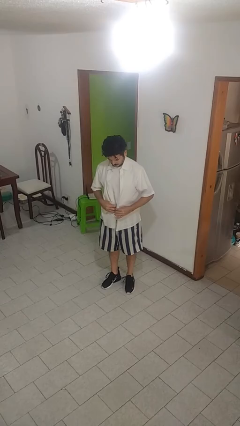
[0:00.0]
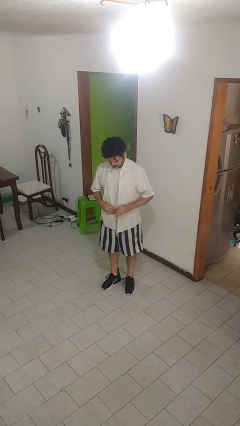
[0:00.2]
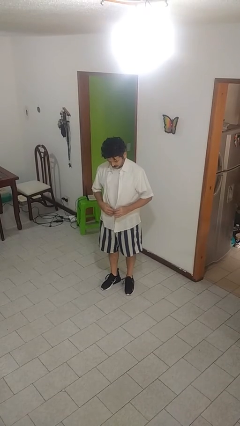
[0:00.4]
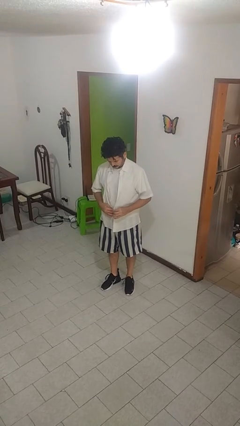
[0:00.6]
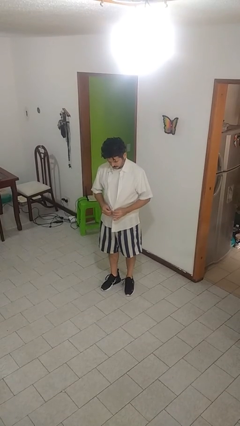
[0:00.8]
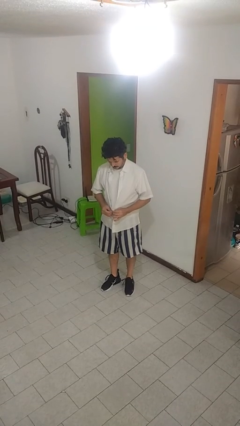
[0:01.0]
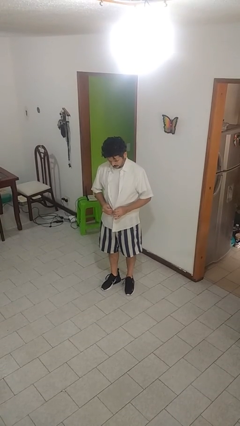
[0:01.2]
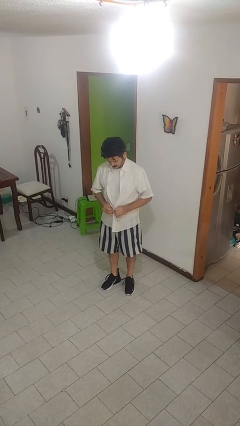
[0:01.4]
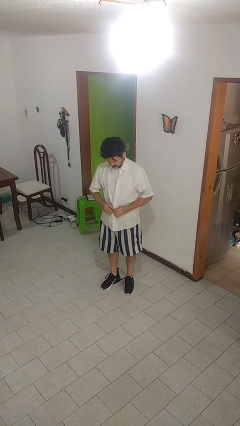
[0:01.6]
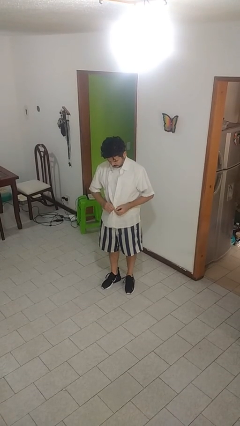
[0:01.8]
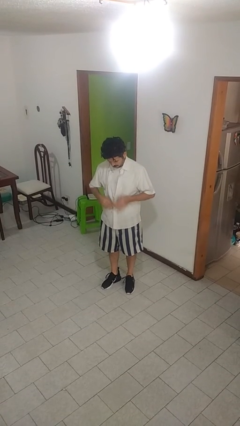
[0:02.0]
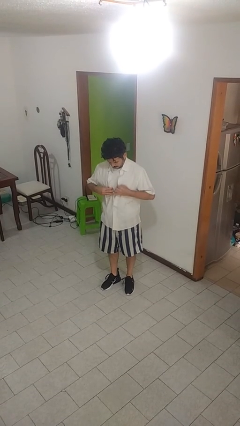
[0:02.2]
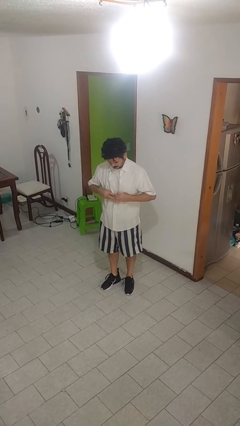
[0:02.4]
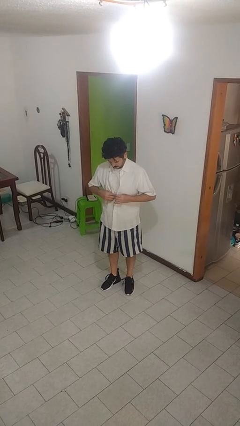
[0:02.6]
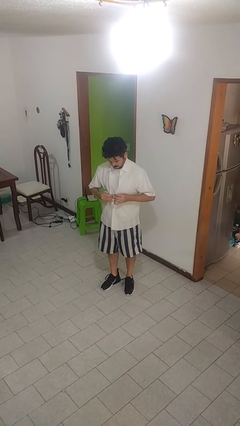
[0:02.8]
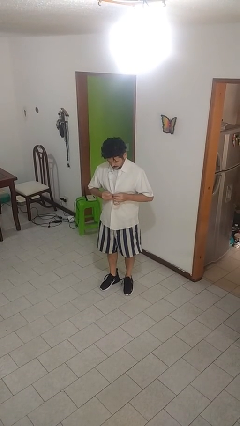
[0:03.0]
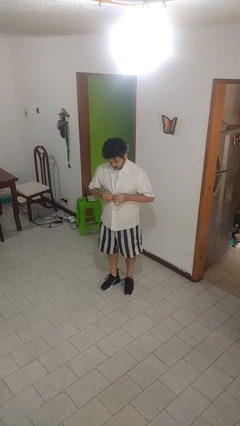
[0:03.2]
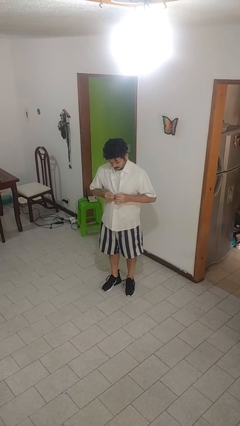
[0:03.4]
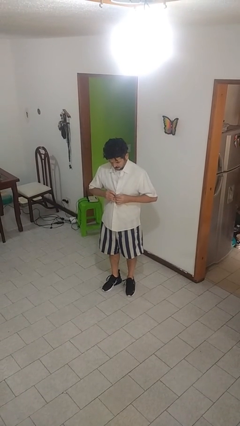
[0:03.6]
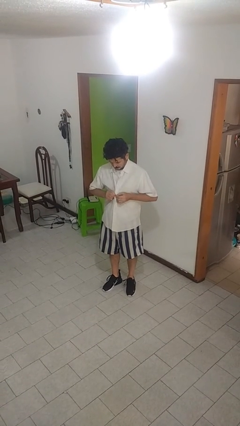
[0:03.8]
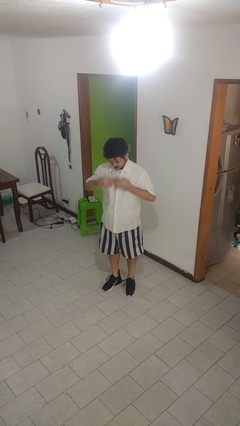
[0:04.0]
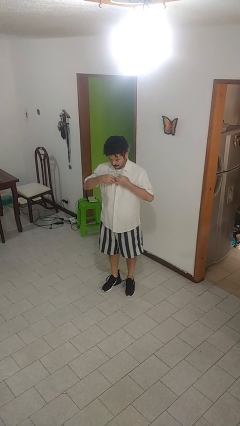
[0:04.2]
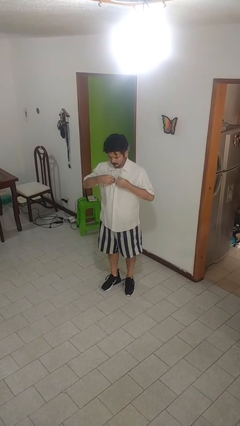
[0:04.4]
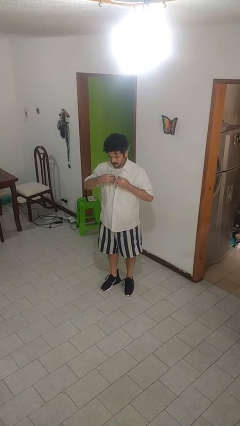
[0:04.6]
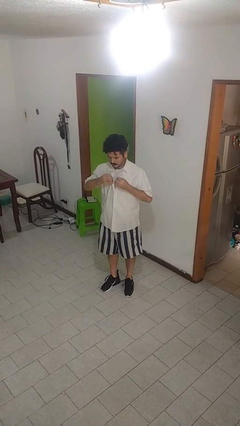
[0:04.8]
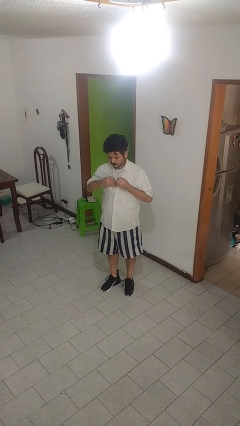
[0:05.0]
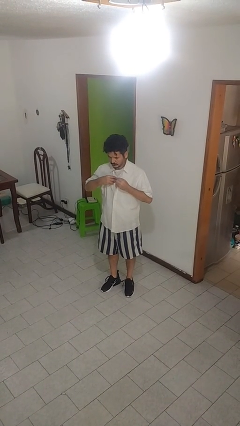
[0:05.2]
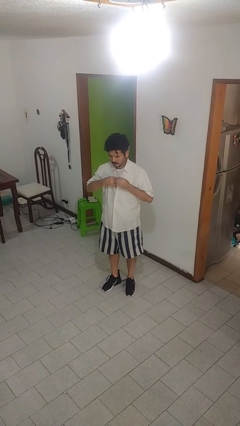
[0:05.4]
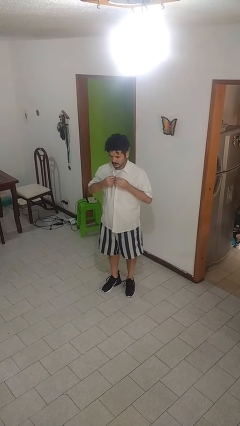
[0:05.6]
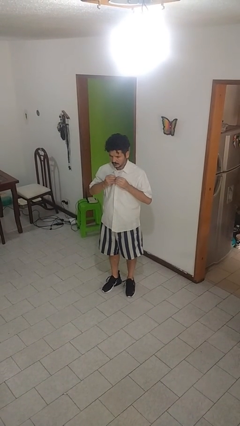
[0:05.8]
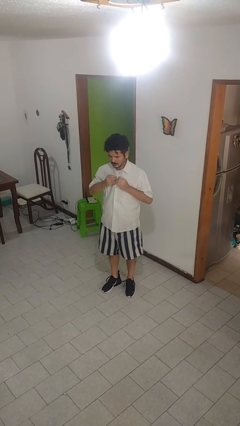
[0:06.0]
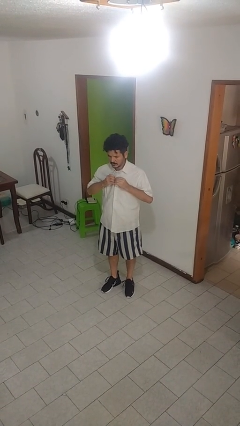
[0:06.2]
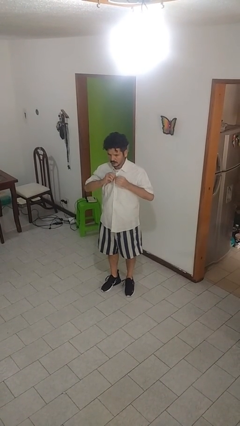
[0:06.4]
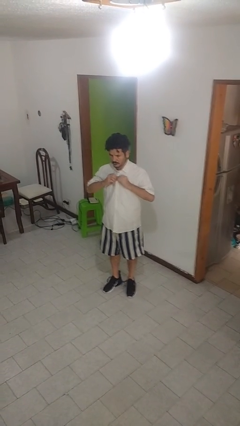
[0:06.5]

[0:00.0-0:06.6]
person buttons shirt

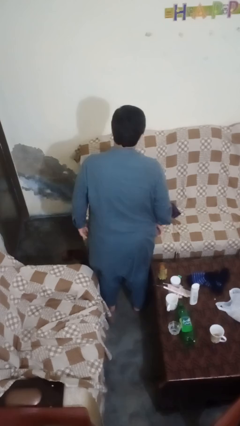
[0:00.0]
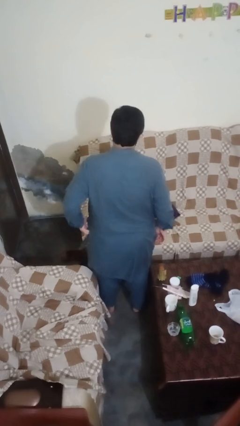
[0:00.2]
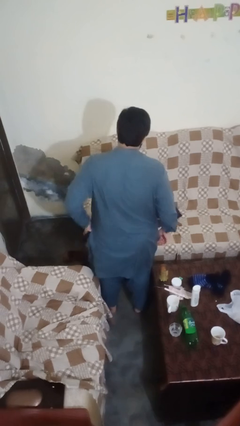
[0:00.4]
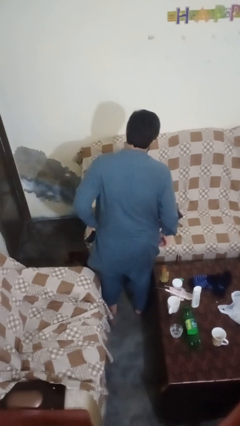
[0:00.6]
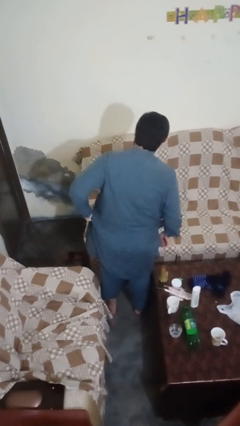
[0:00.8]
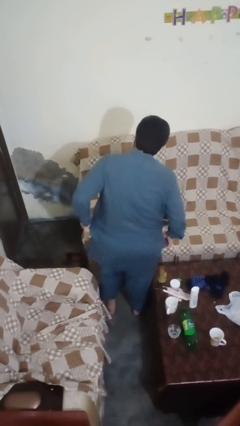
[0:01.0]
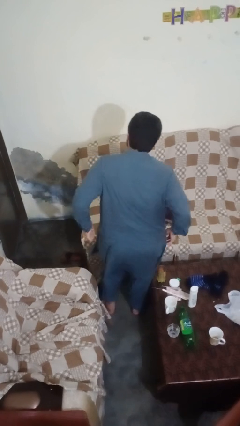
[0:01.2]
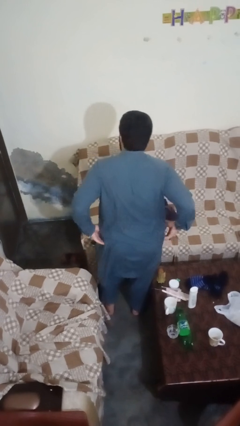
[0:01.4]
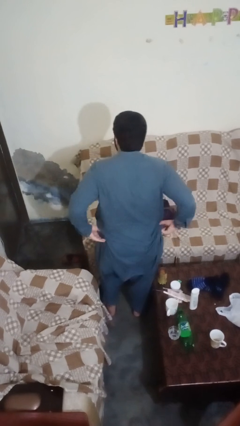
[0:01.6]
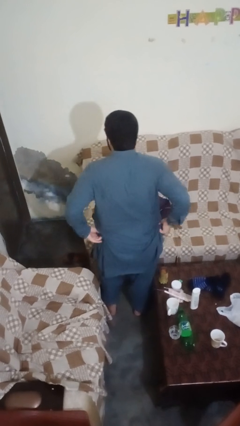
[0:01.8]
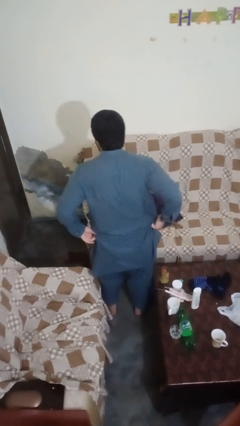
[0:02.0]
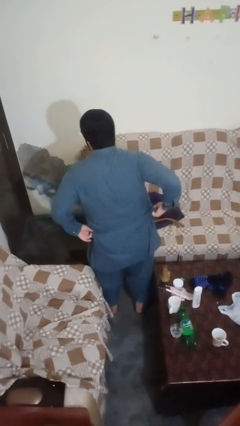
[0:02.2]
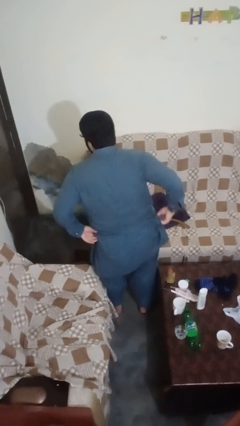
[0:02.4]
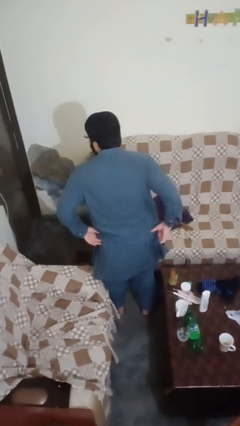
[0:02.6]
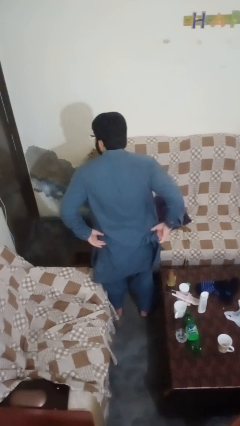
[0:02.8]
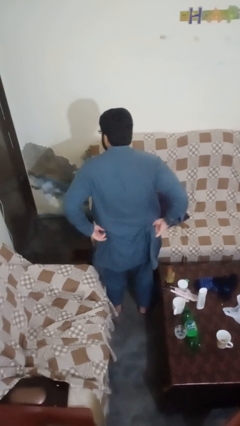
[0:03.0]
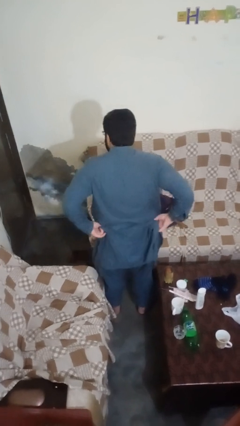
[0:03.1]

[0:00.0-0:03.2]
person hikes up pants

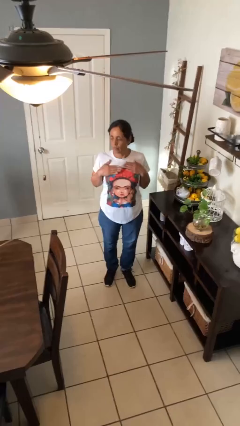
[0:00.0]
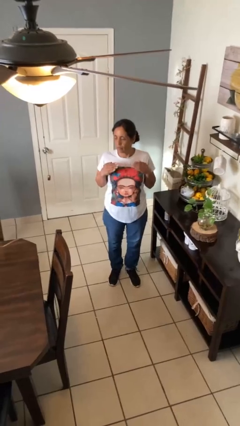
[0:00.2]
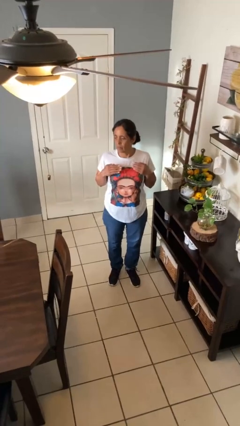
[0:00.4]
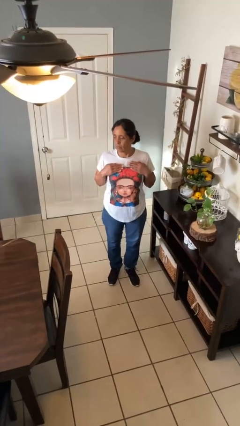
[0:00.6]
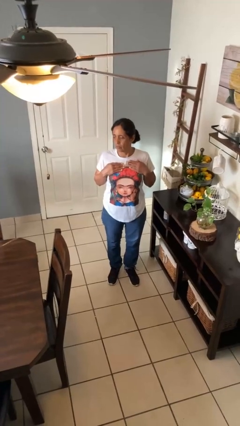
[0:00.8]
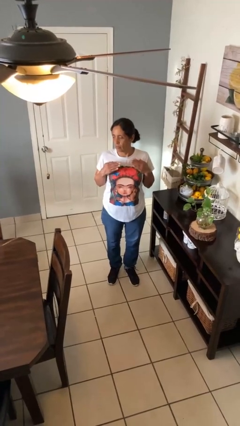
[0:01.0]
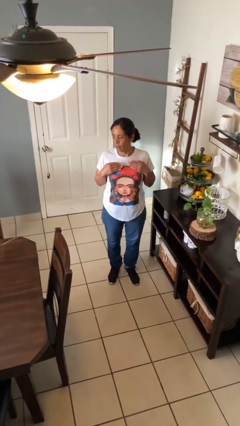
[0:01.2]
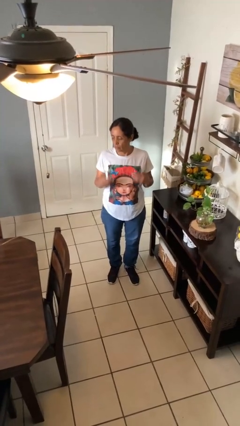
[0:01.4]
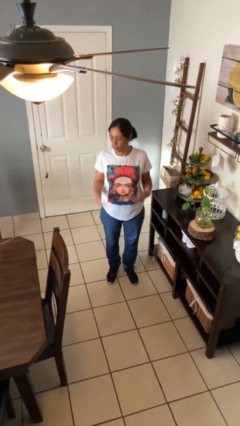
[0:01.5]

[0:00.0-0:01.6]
person drums on chest

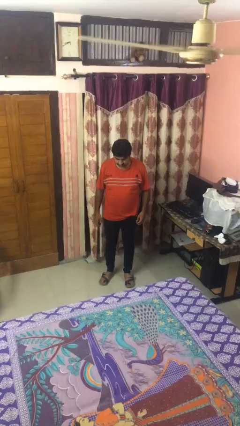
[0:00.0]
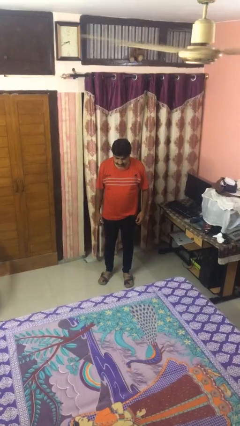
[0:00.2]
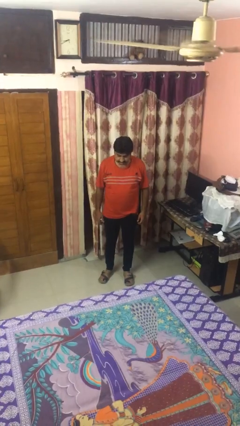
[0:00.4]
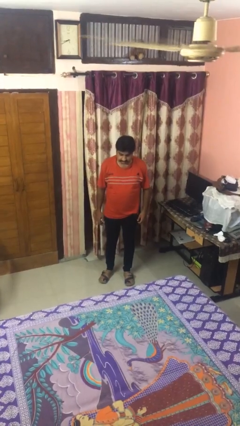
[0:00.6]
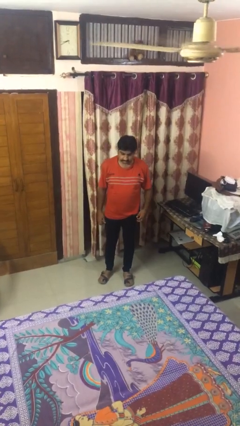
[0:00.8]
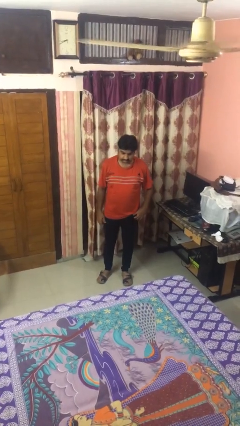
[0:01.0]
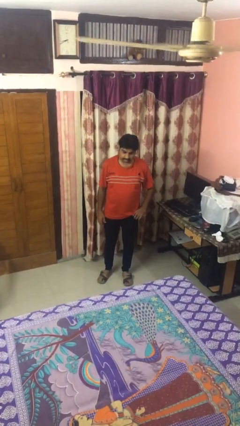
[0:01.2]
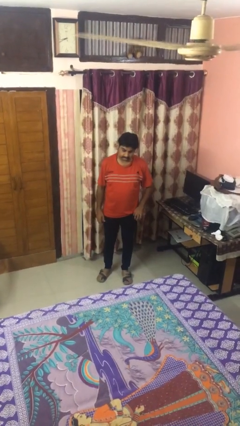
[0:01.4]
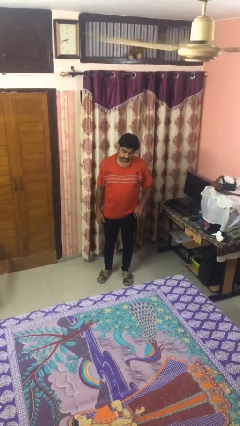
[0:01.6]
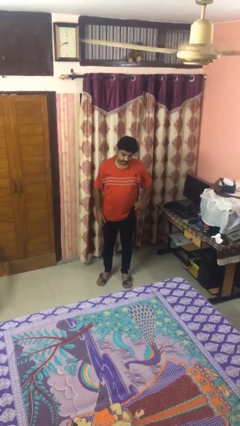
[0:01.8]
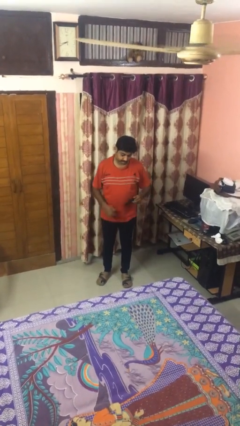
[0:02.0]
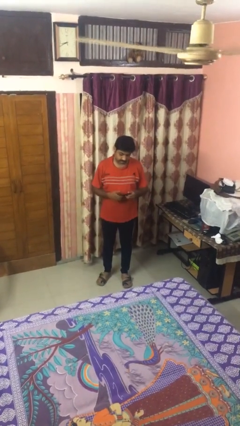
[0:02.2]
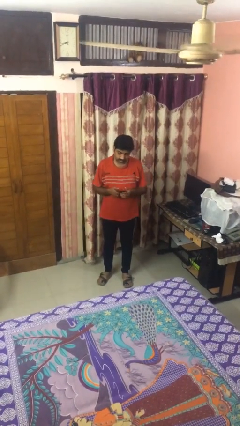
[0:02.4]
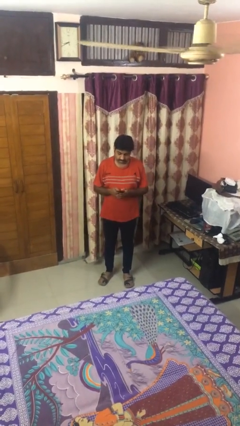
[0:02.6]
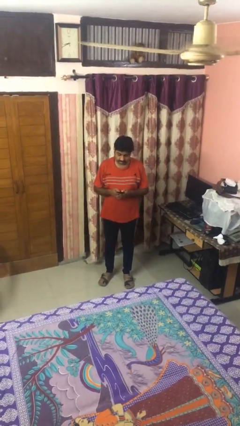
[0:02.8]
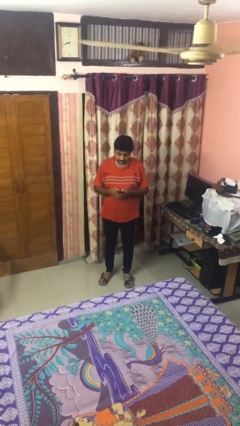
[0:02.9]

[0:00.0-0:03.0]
person takes phone from pocket

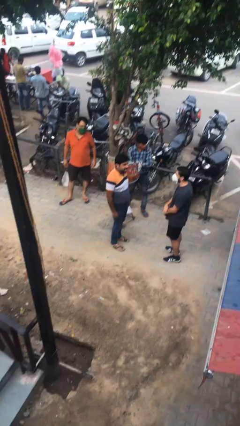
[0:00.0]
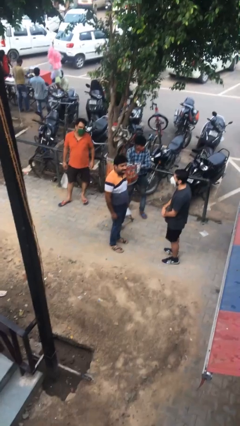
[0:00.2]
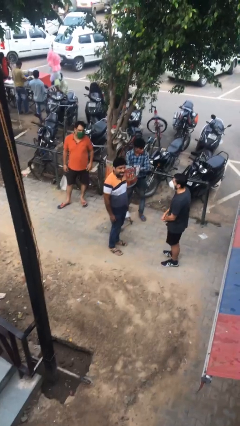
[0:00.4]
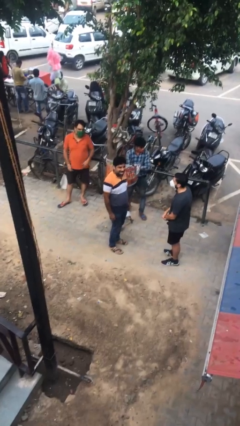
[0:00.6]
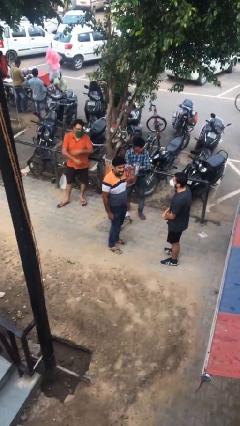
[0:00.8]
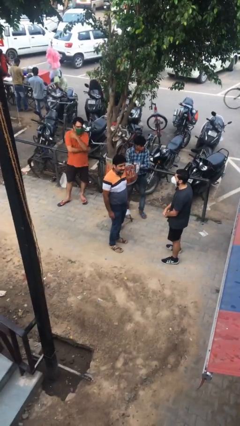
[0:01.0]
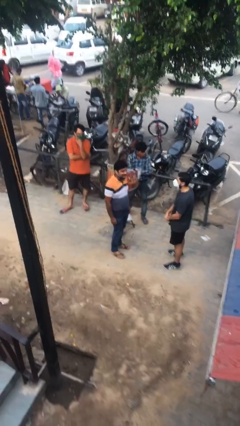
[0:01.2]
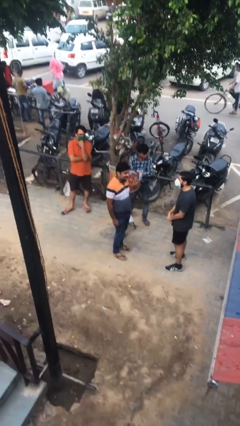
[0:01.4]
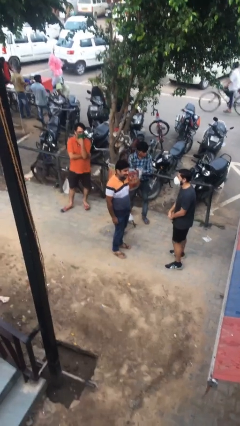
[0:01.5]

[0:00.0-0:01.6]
person laughs with person

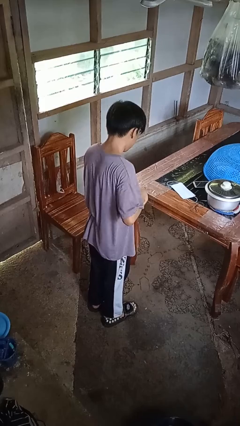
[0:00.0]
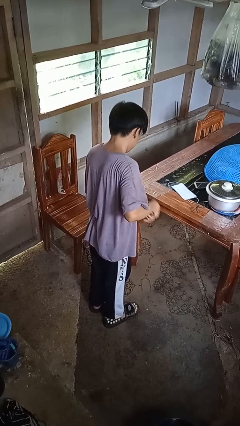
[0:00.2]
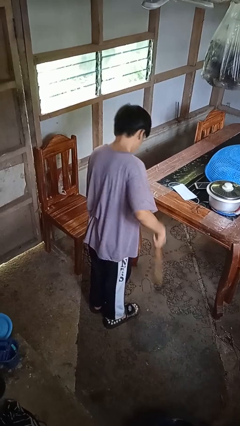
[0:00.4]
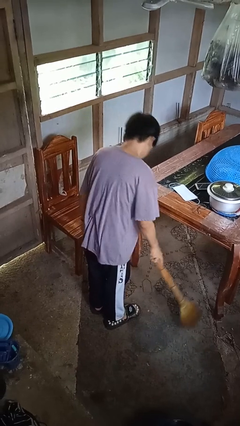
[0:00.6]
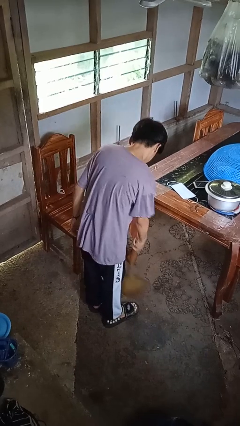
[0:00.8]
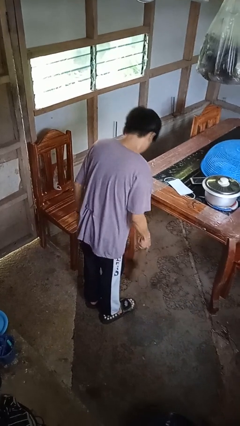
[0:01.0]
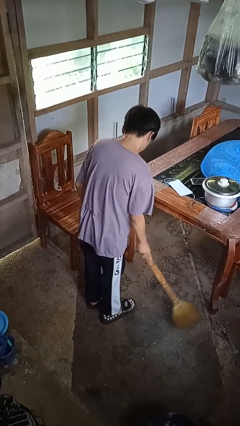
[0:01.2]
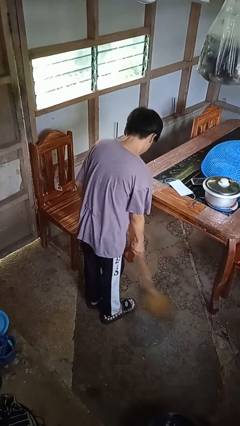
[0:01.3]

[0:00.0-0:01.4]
person sweeps floor
